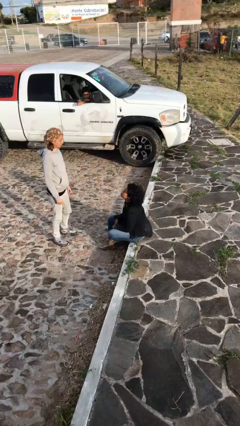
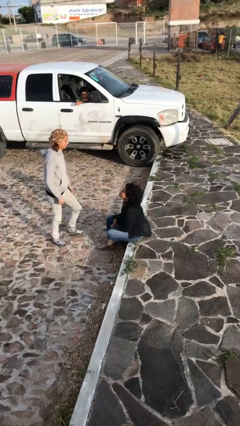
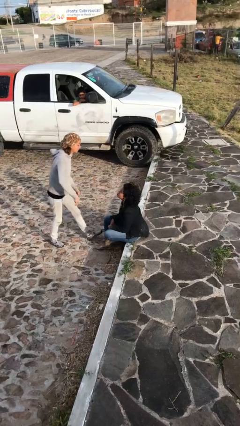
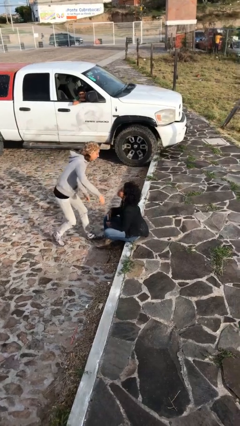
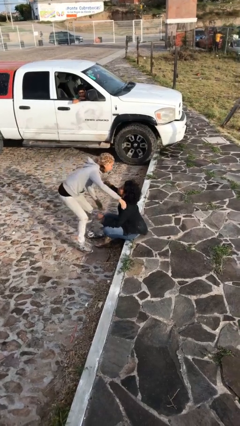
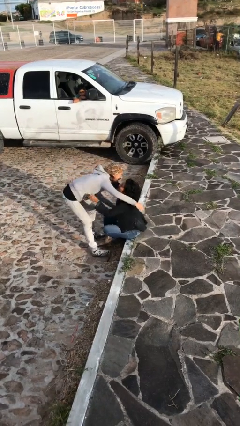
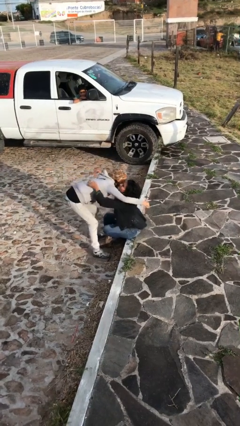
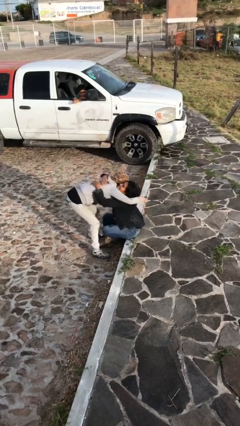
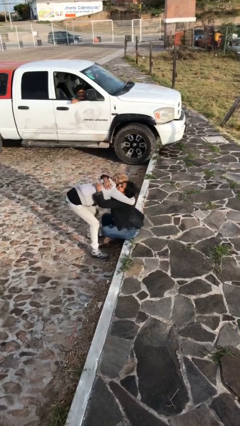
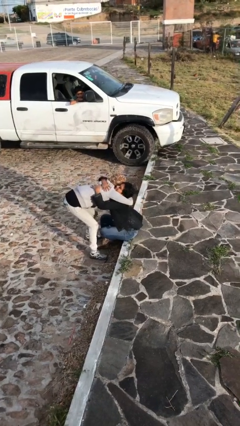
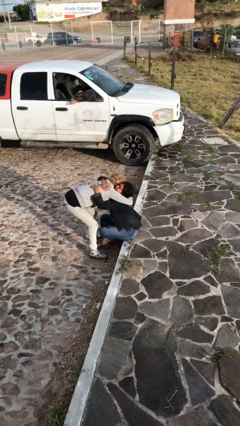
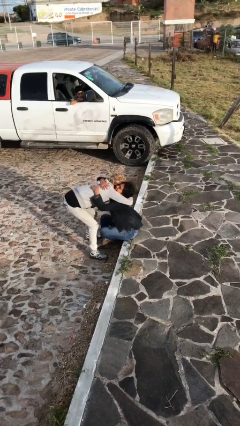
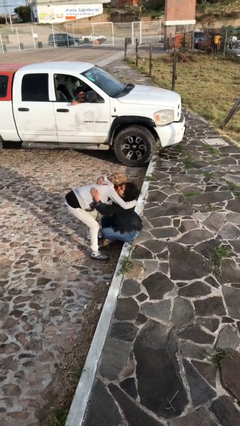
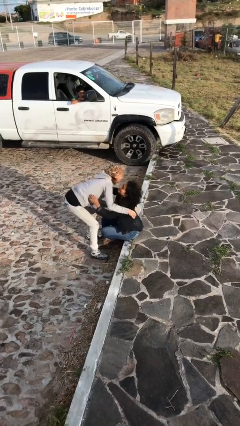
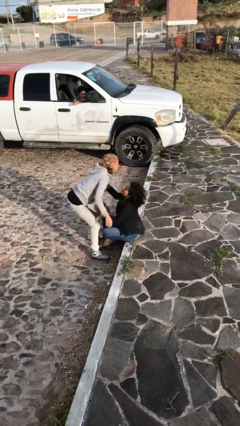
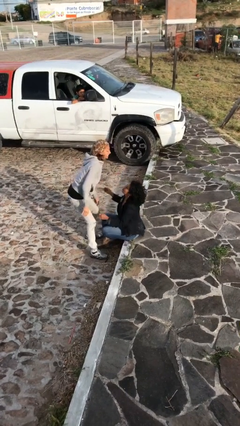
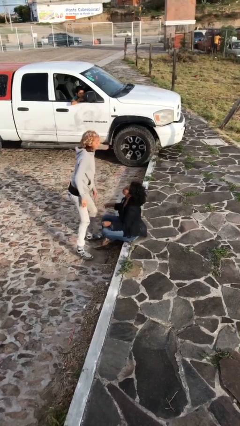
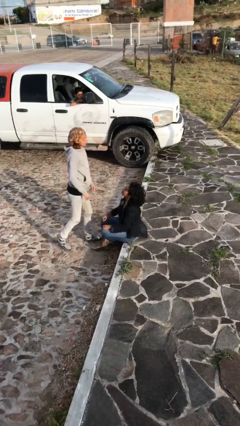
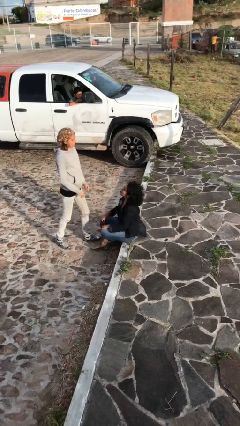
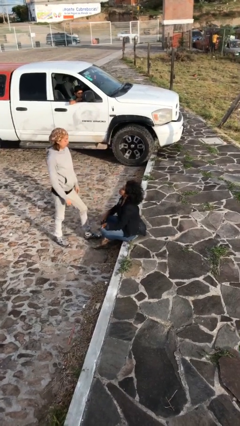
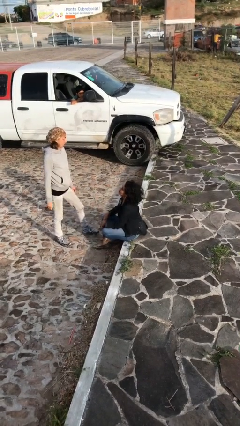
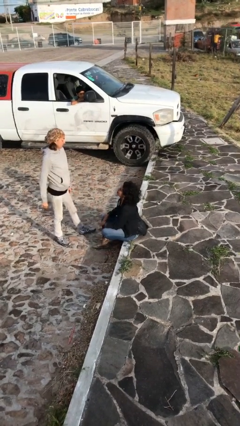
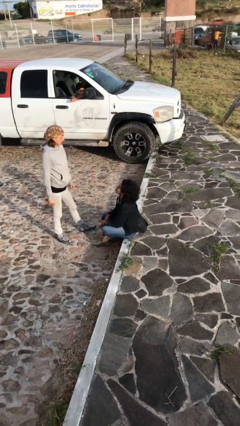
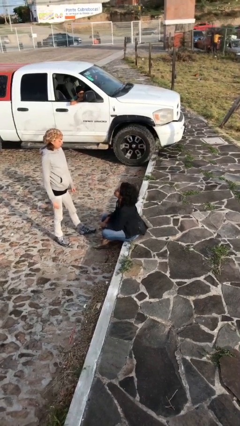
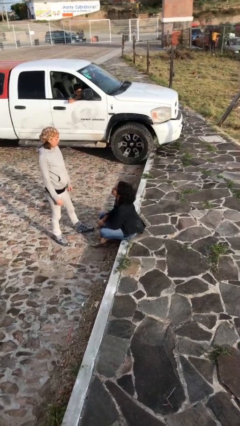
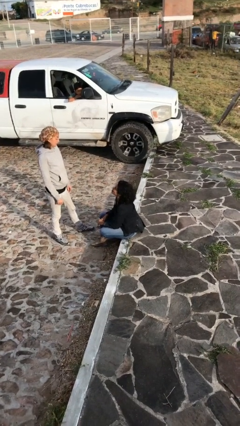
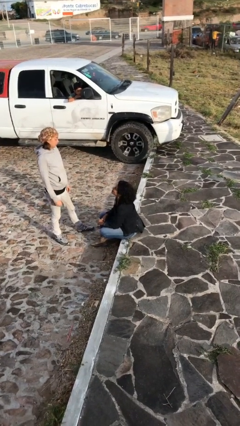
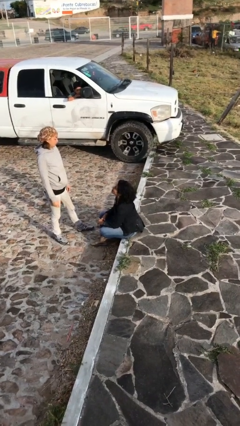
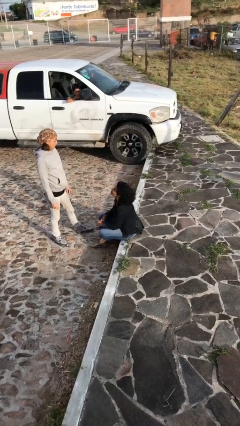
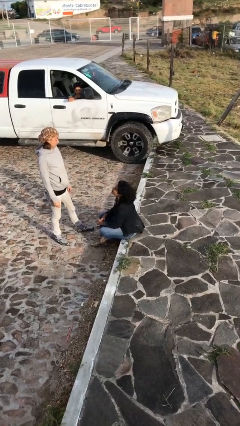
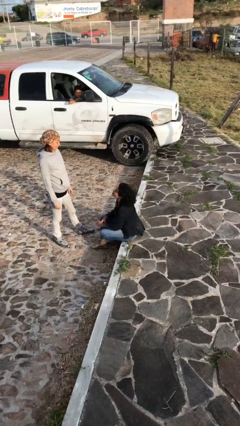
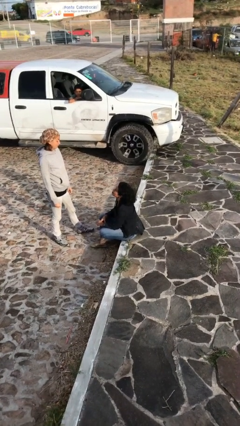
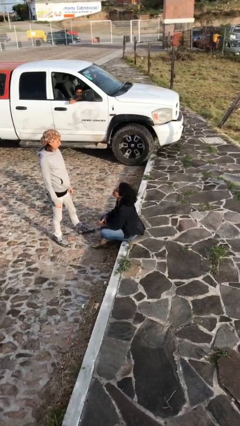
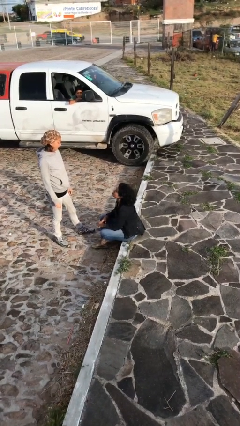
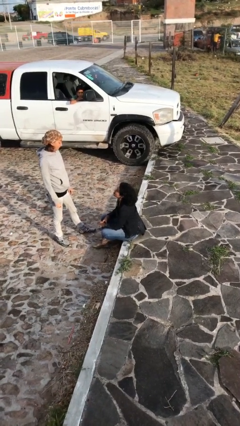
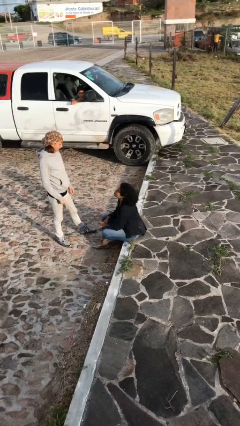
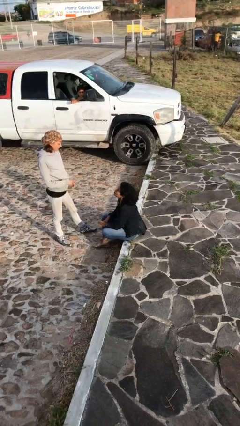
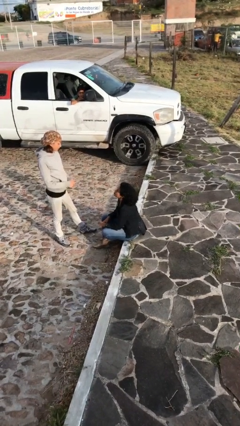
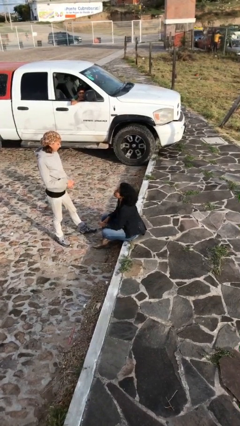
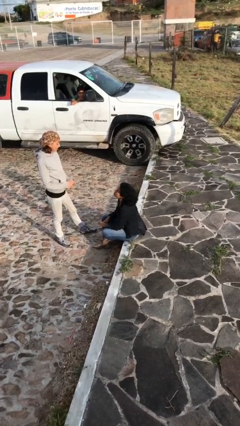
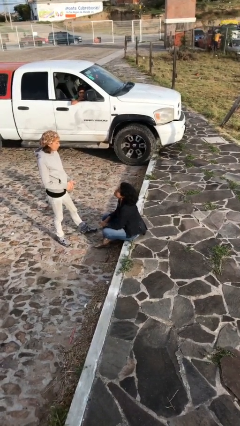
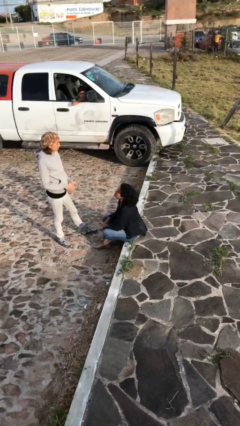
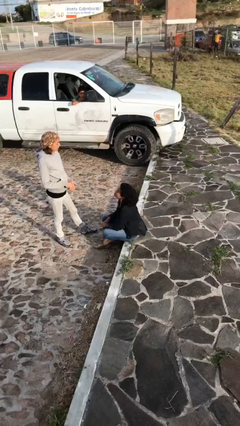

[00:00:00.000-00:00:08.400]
person embraces person

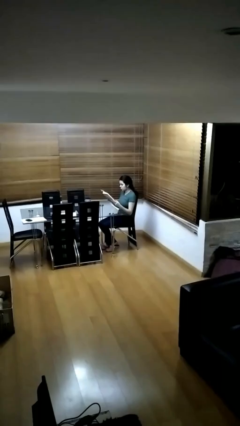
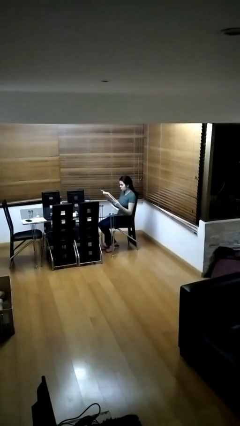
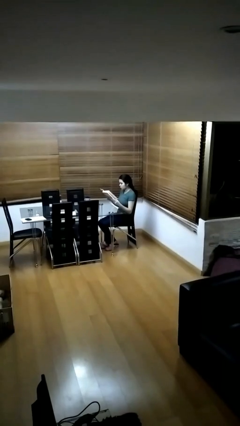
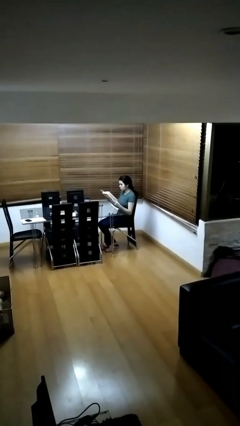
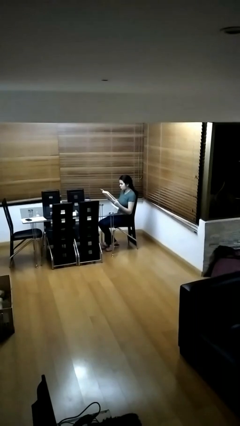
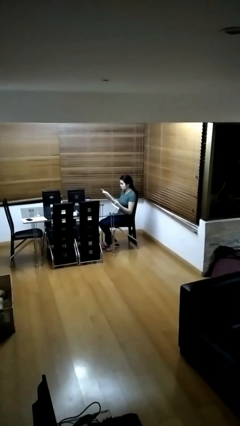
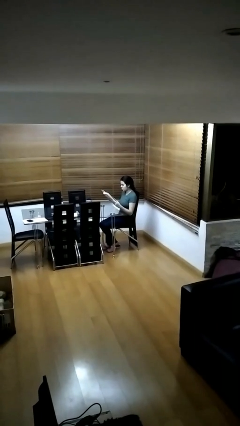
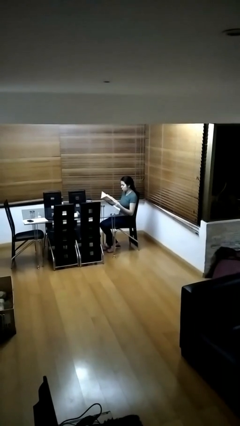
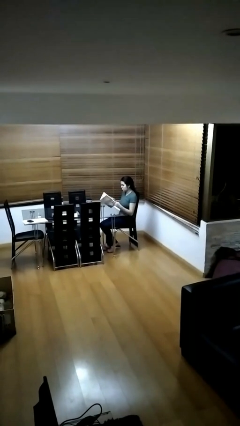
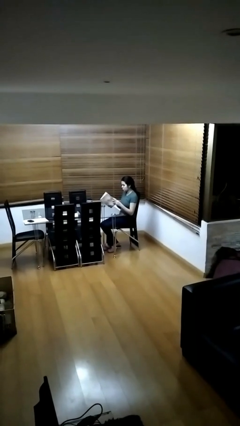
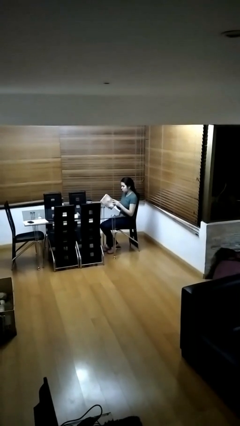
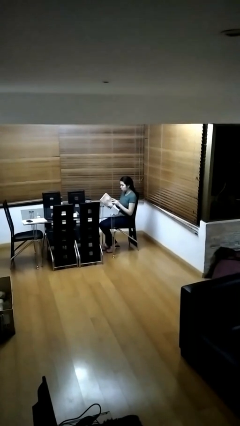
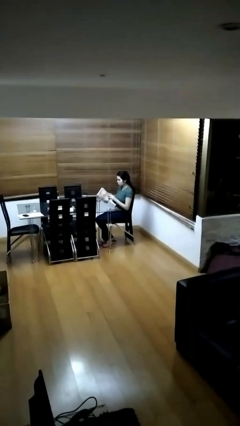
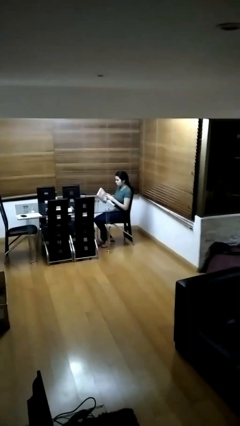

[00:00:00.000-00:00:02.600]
person reads document

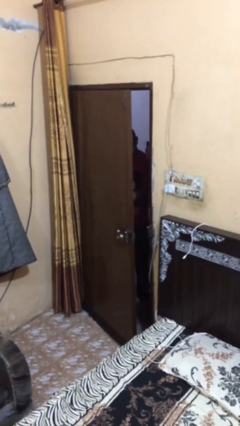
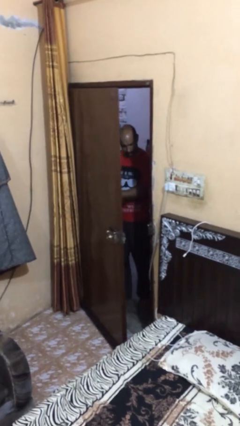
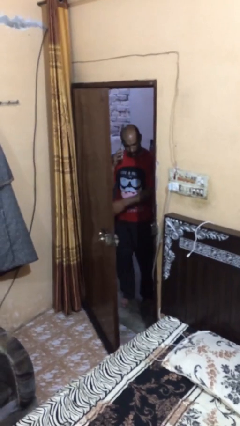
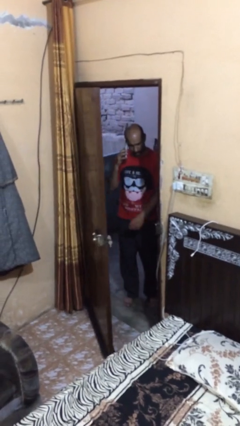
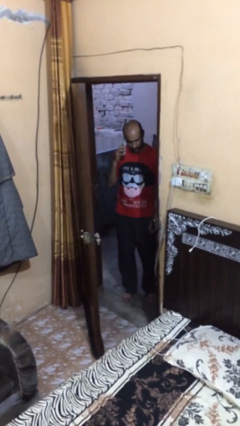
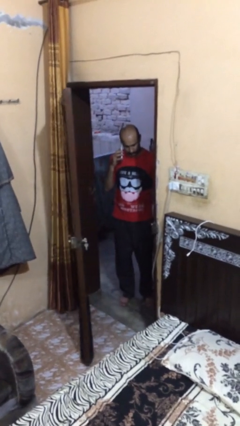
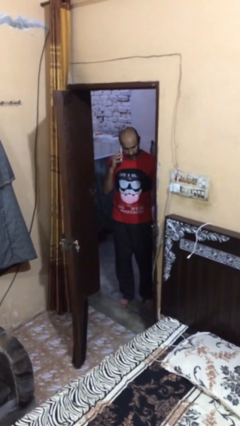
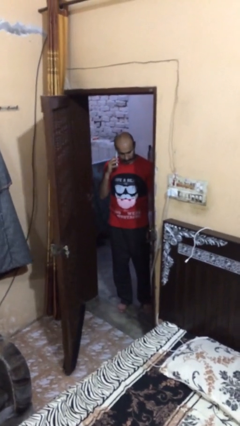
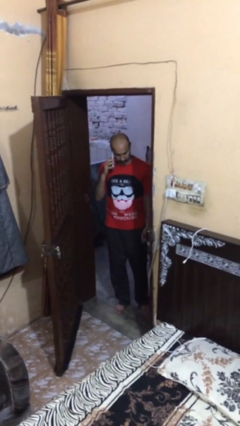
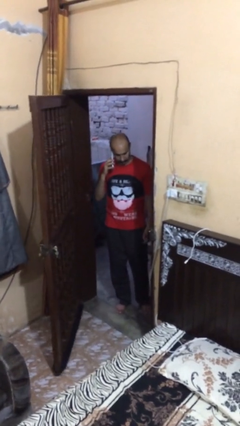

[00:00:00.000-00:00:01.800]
person opens facility door

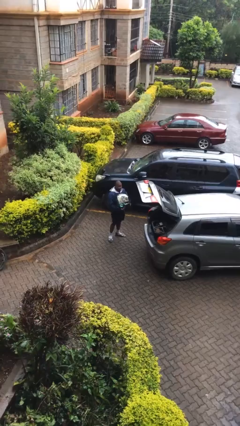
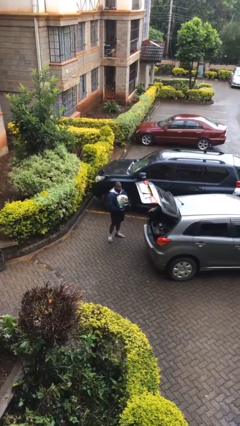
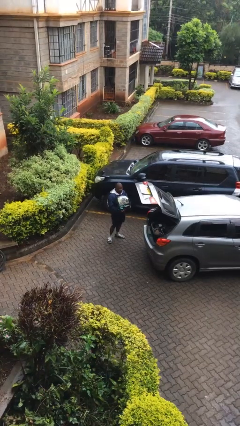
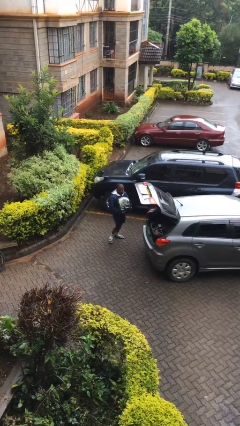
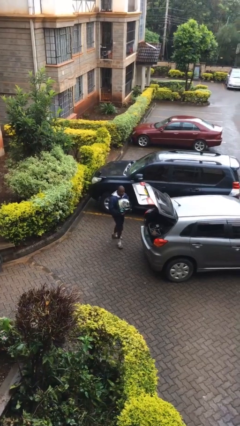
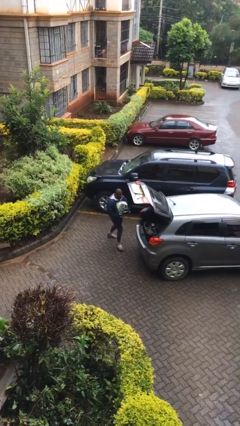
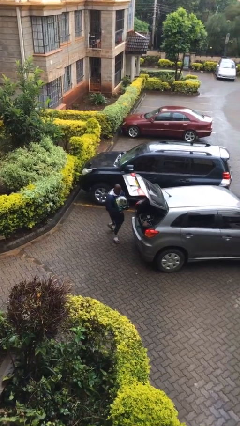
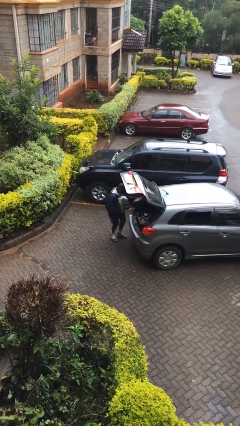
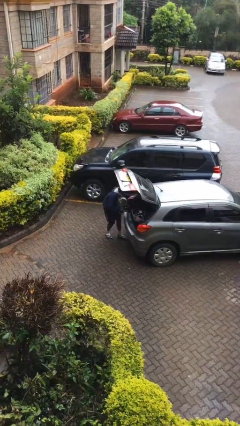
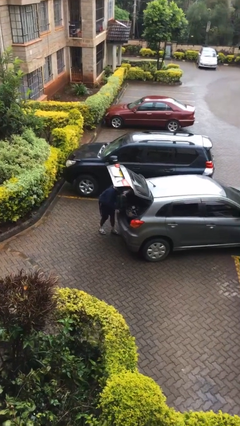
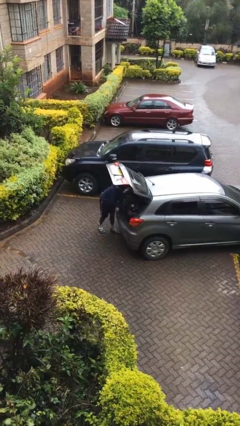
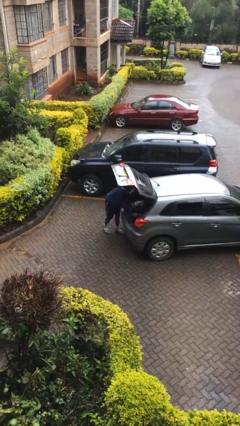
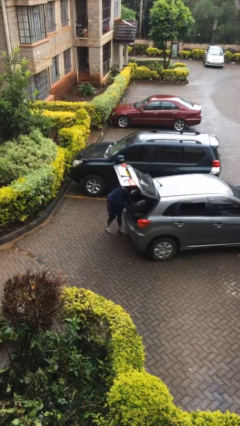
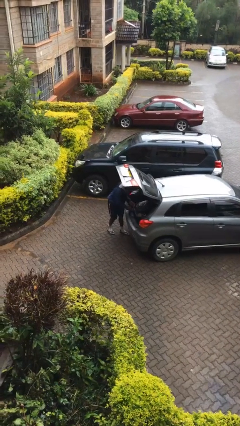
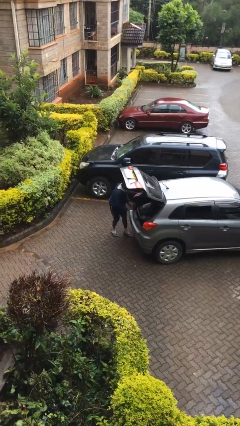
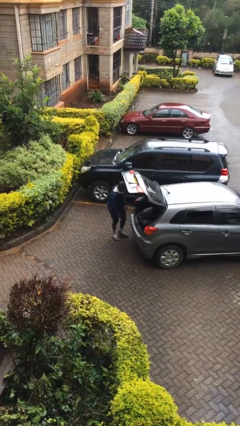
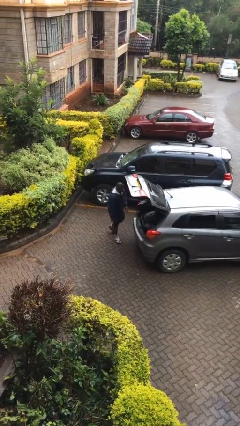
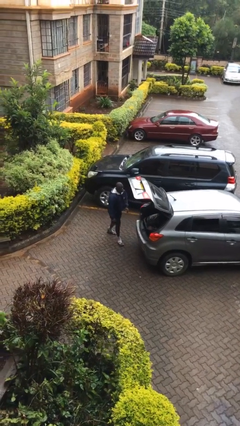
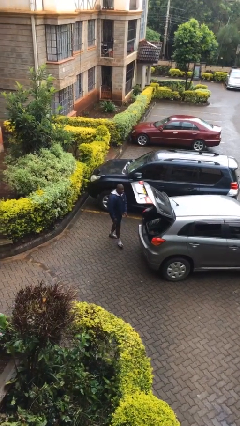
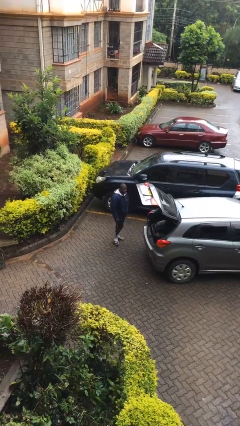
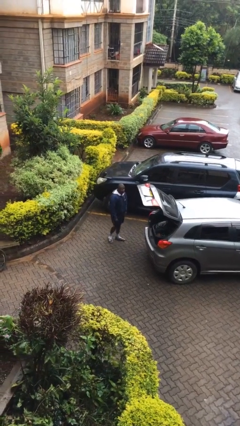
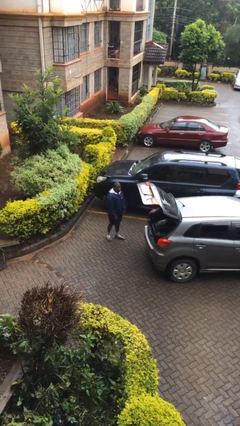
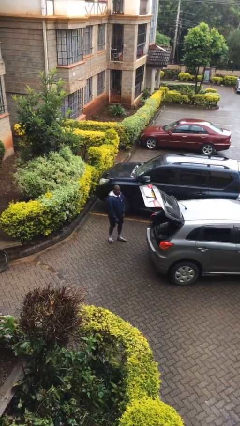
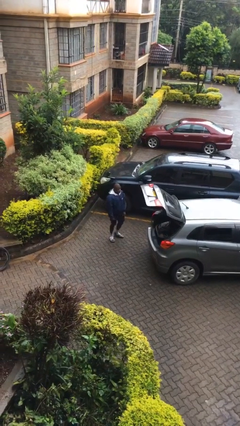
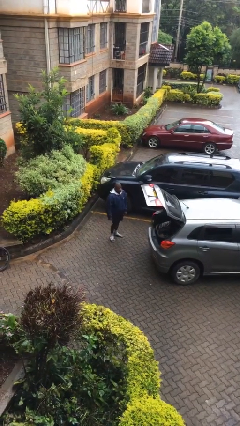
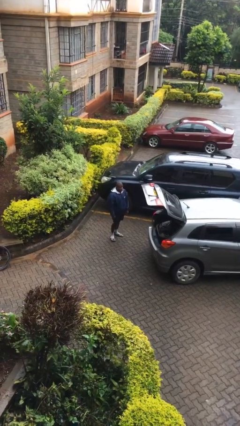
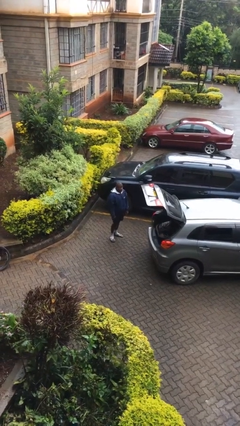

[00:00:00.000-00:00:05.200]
person loads car
